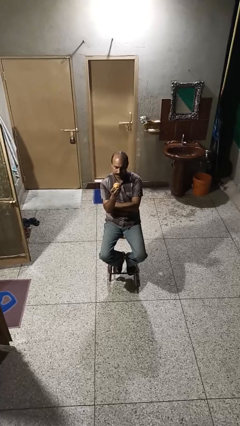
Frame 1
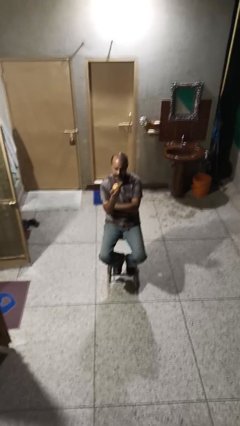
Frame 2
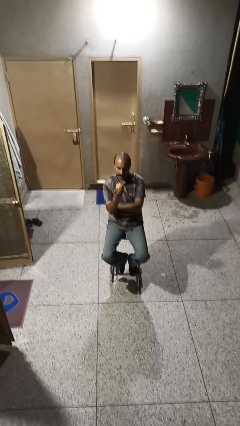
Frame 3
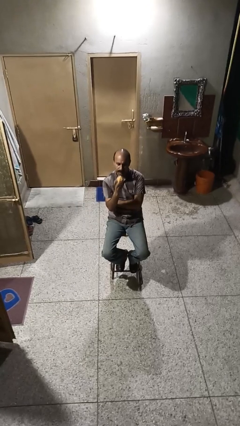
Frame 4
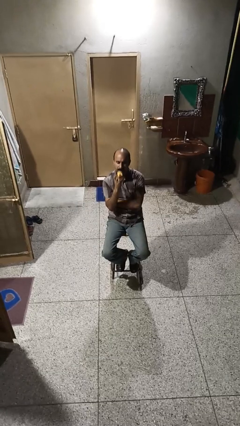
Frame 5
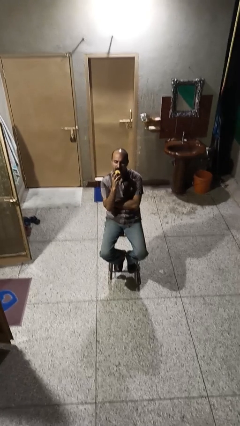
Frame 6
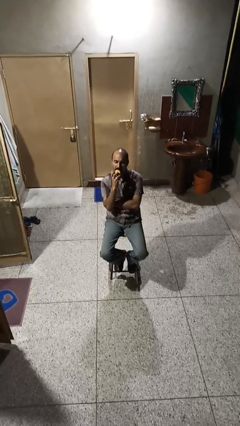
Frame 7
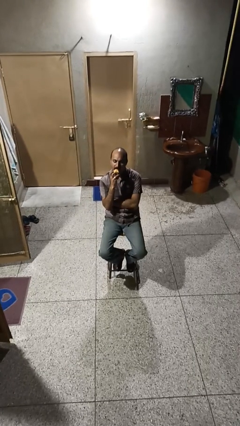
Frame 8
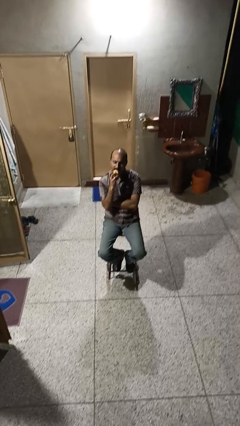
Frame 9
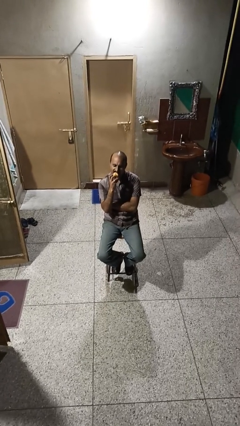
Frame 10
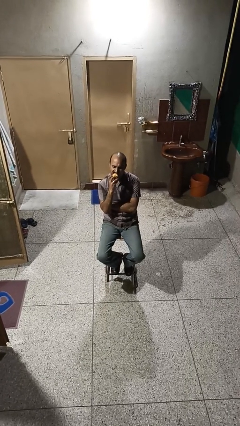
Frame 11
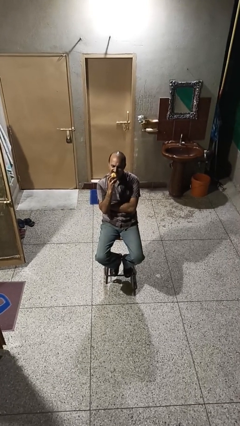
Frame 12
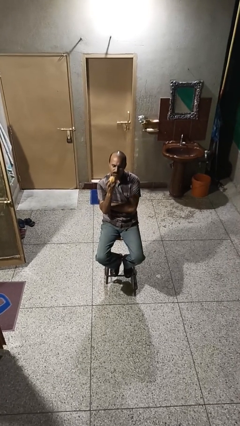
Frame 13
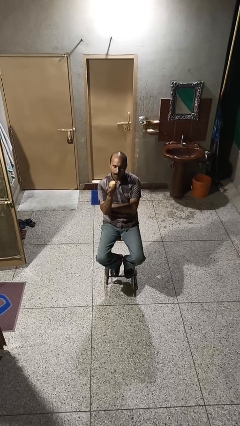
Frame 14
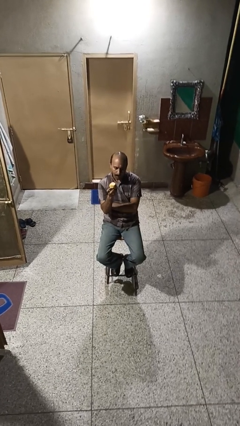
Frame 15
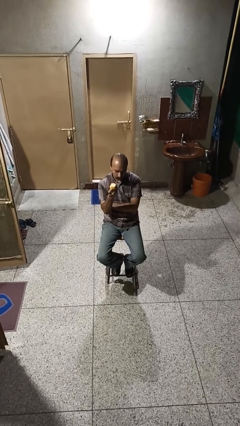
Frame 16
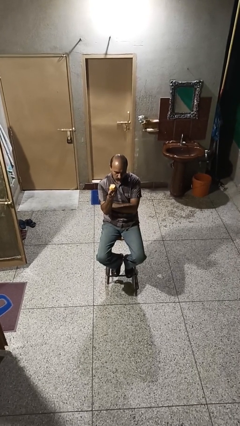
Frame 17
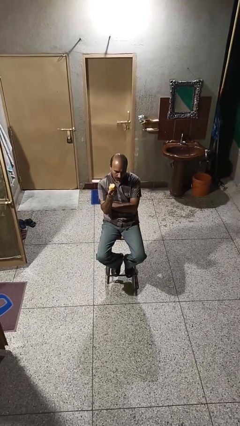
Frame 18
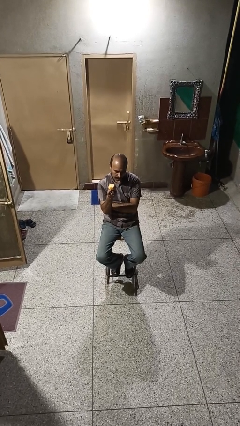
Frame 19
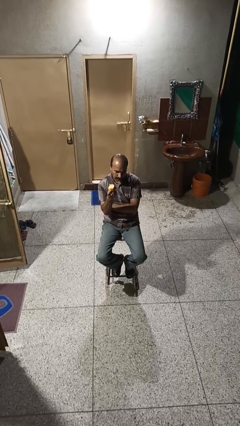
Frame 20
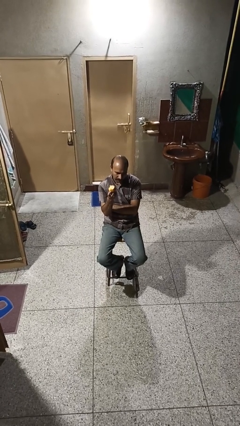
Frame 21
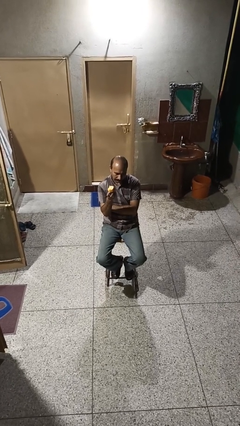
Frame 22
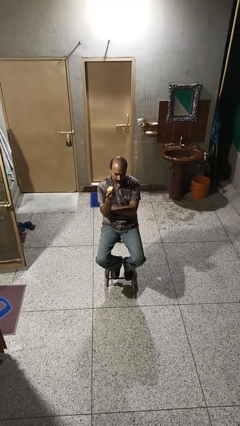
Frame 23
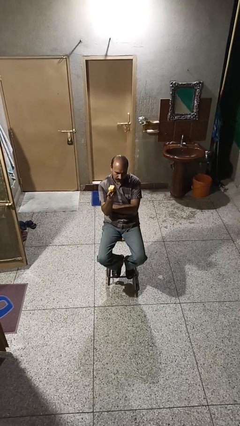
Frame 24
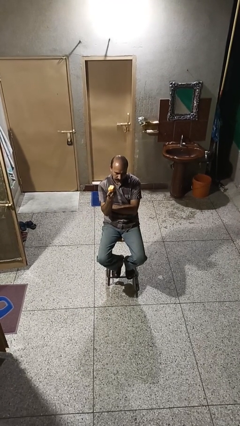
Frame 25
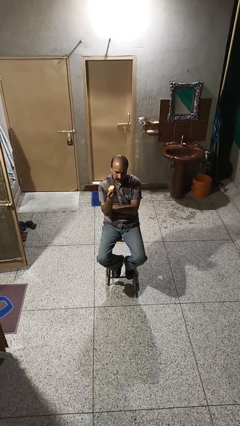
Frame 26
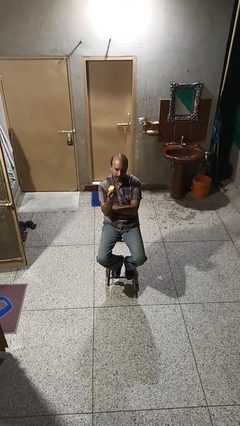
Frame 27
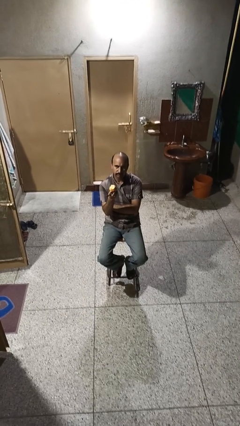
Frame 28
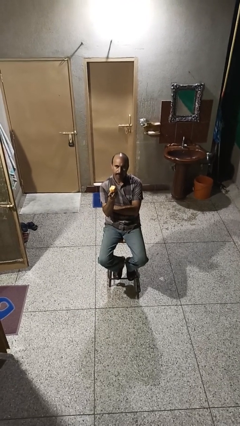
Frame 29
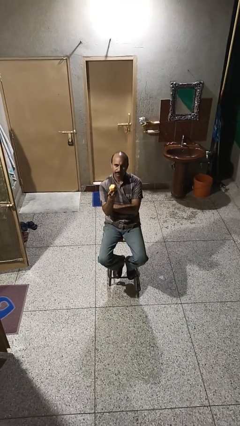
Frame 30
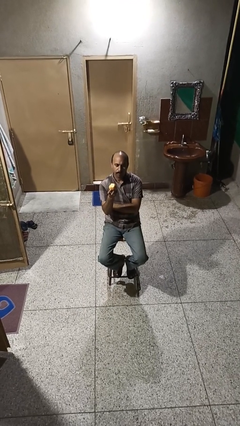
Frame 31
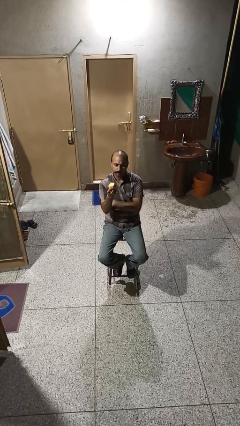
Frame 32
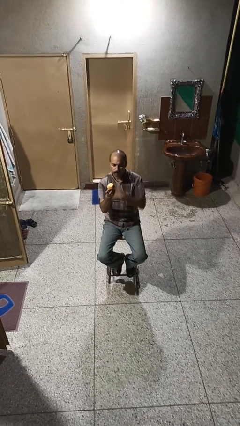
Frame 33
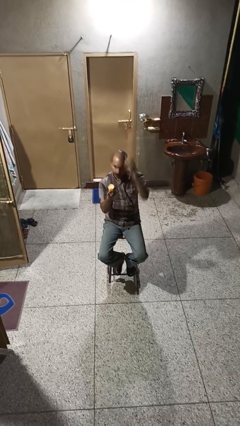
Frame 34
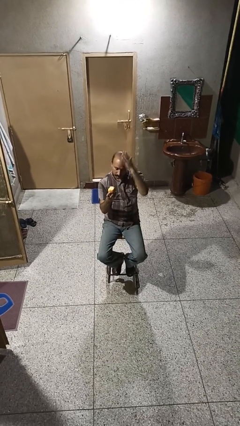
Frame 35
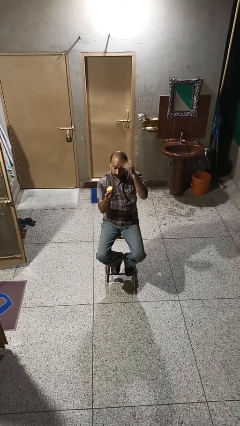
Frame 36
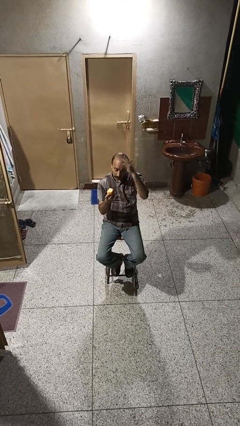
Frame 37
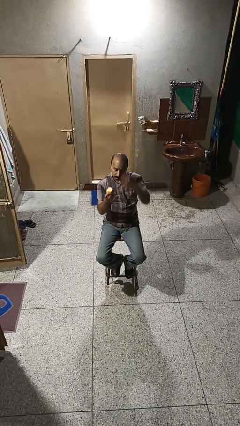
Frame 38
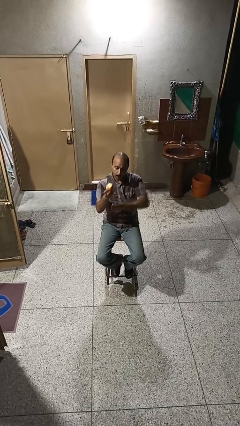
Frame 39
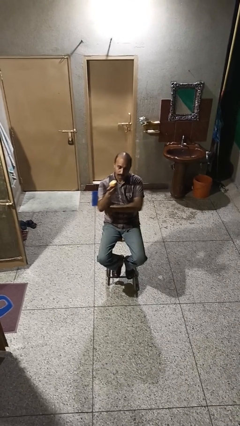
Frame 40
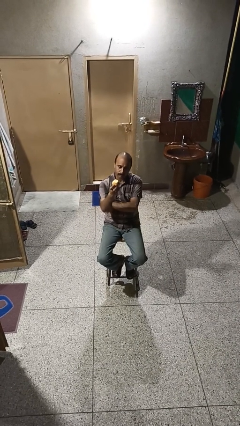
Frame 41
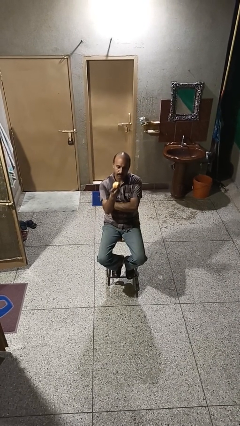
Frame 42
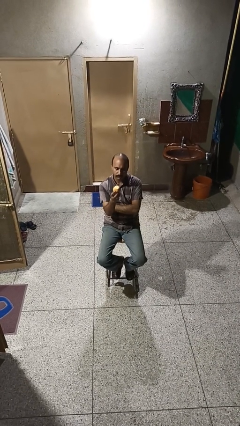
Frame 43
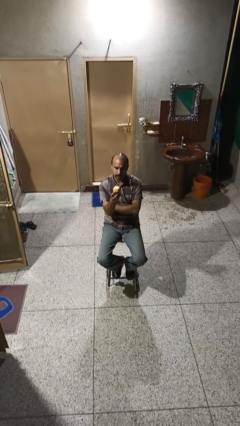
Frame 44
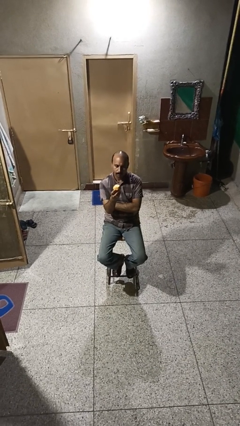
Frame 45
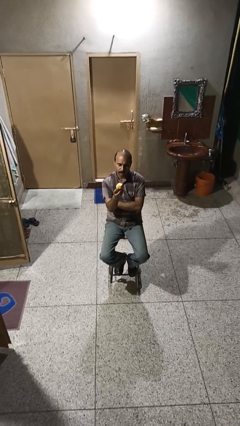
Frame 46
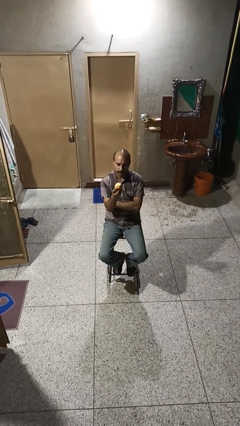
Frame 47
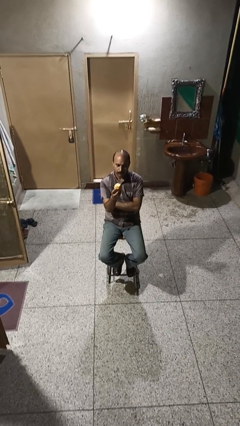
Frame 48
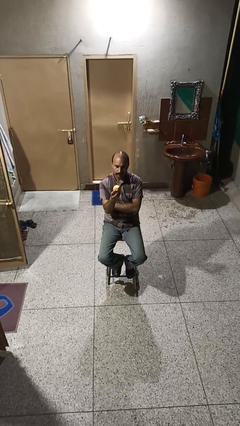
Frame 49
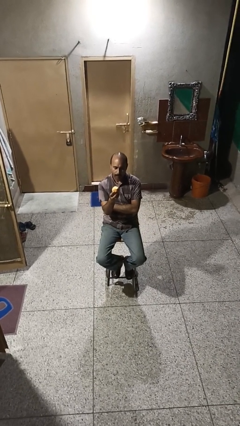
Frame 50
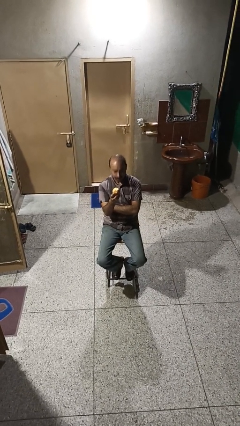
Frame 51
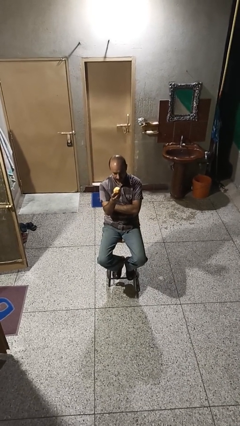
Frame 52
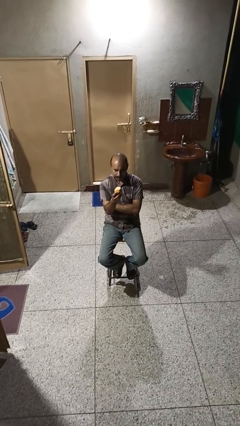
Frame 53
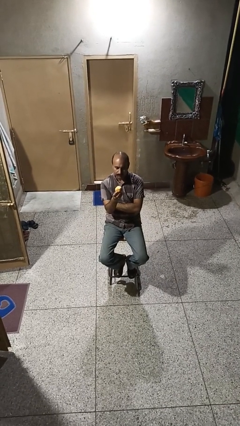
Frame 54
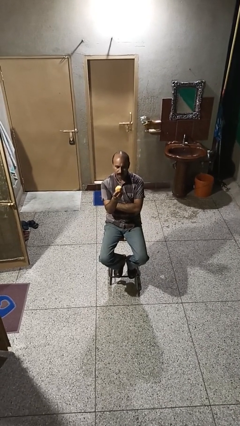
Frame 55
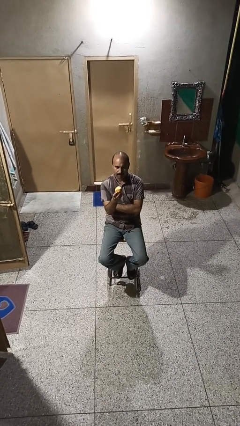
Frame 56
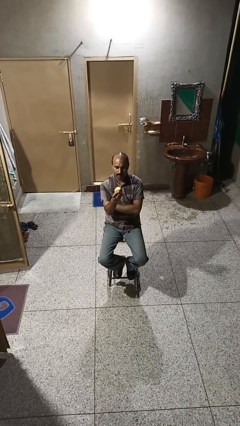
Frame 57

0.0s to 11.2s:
person eats apple

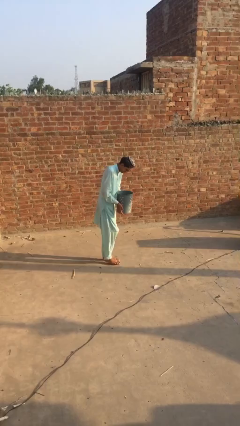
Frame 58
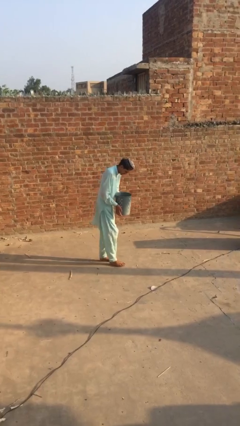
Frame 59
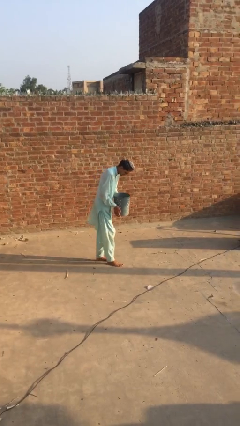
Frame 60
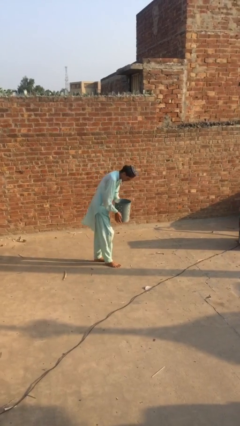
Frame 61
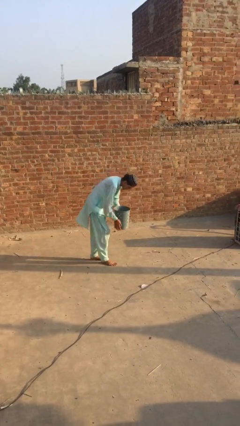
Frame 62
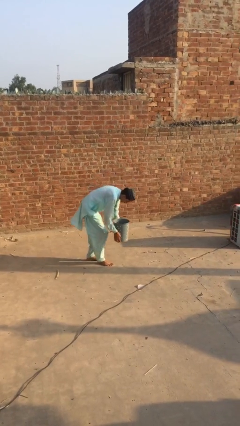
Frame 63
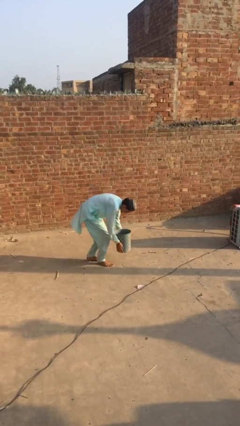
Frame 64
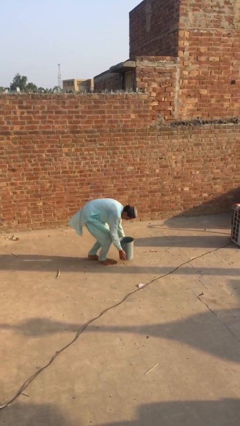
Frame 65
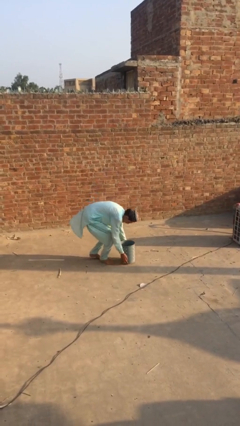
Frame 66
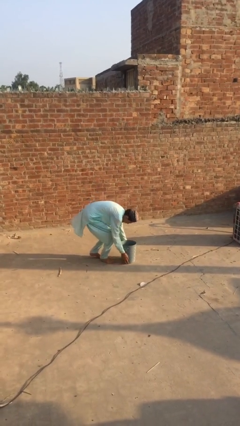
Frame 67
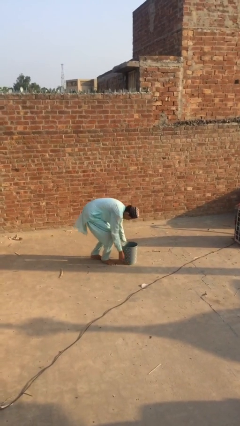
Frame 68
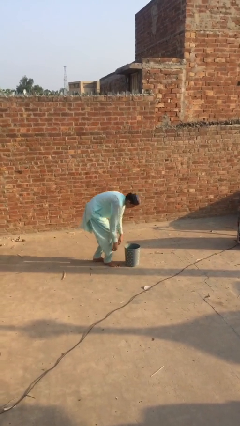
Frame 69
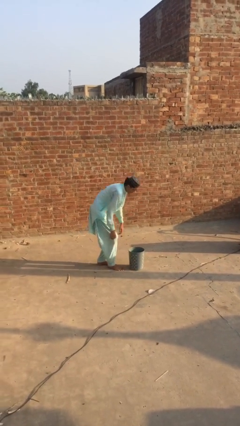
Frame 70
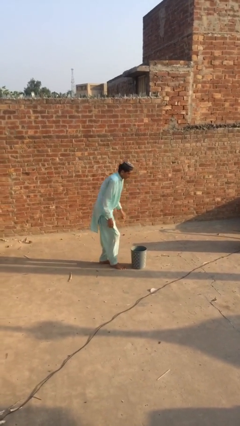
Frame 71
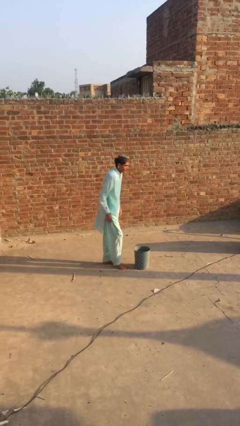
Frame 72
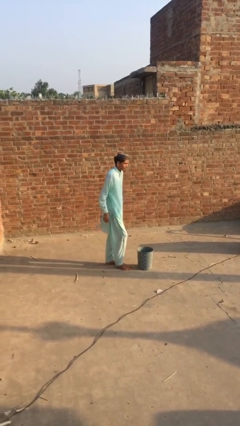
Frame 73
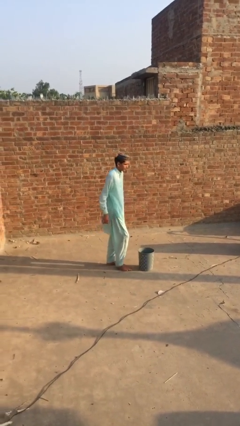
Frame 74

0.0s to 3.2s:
person puts down object on floor

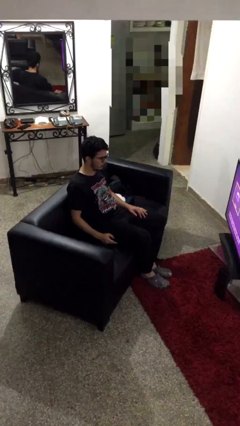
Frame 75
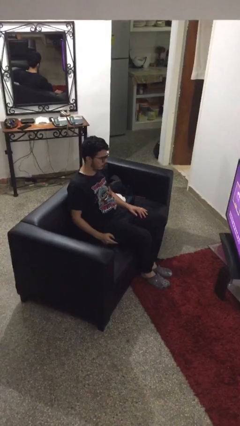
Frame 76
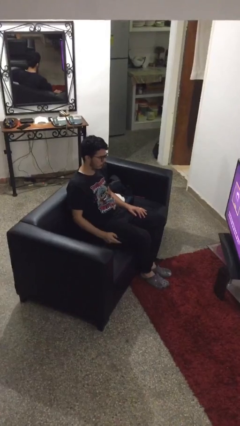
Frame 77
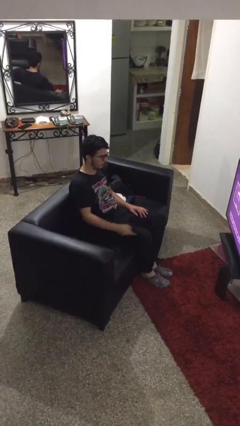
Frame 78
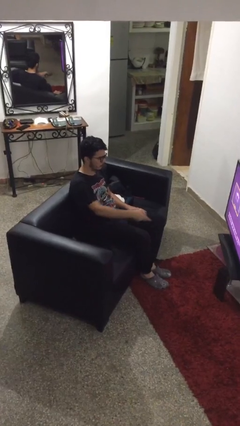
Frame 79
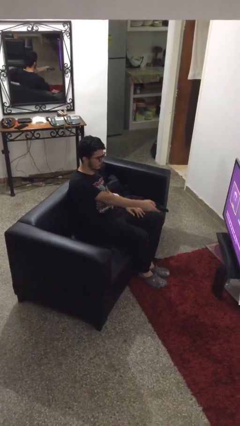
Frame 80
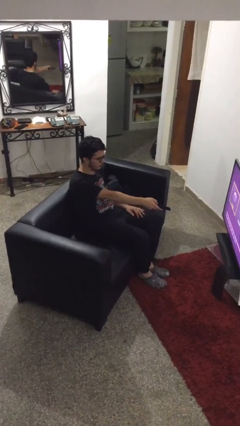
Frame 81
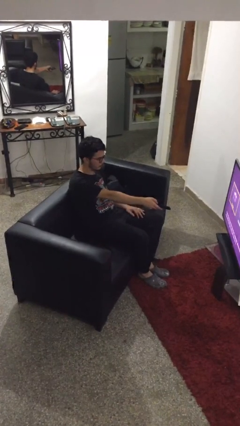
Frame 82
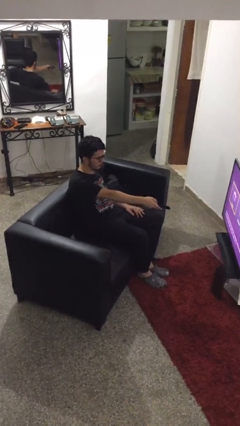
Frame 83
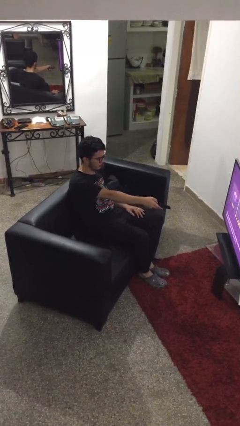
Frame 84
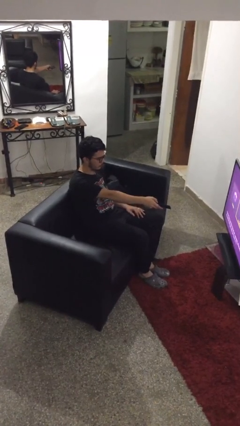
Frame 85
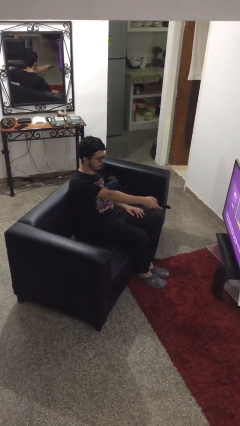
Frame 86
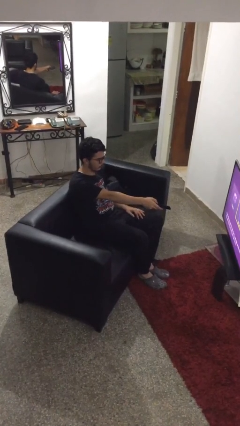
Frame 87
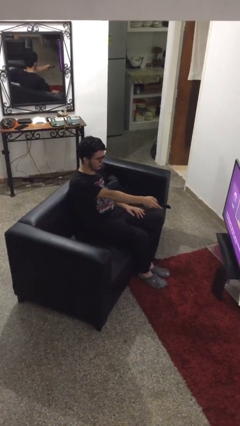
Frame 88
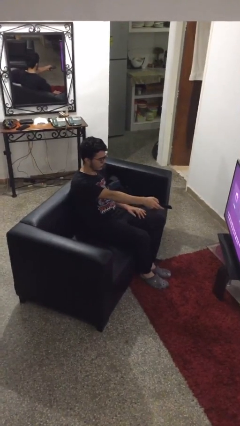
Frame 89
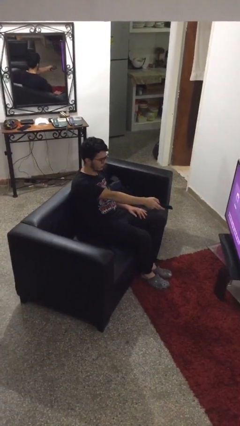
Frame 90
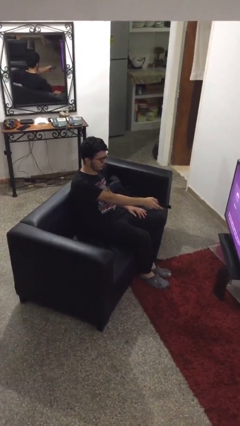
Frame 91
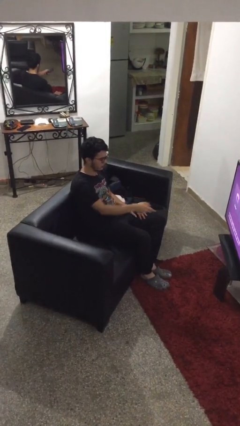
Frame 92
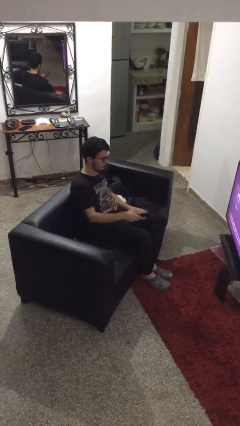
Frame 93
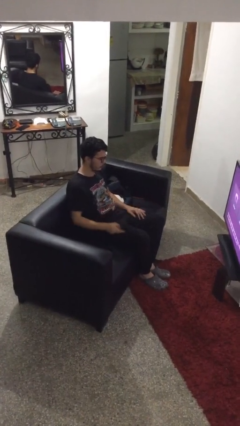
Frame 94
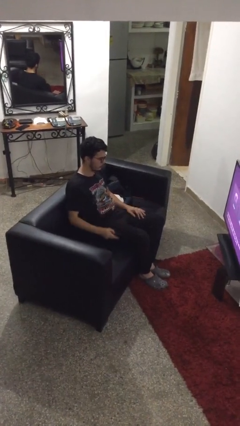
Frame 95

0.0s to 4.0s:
person uses television remote
